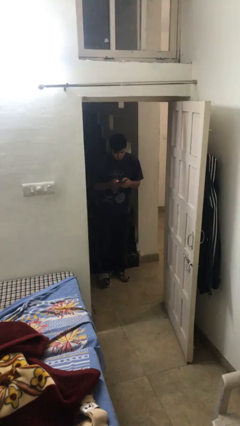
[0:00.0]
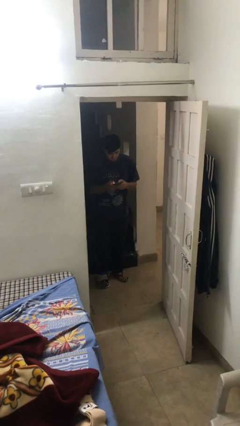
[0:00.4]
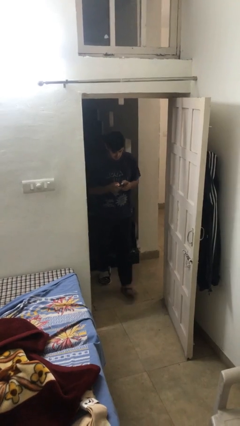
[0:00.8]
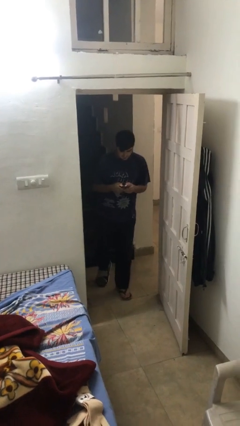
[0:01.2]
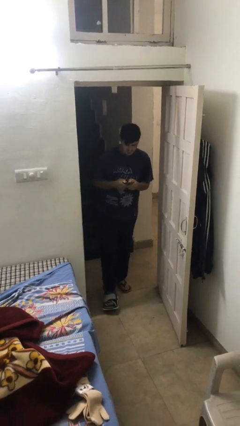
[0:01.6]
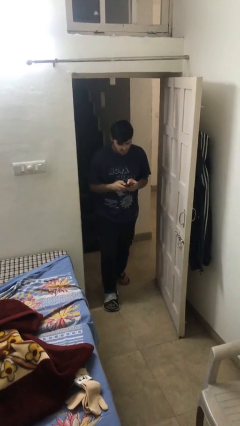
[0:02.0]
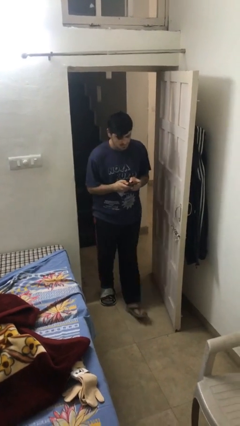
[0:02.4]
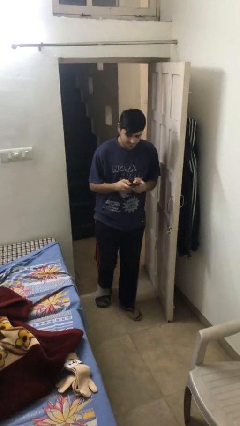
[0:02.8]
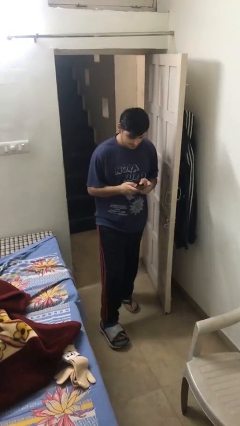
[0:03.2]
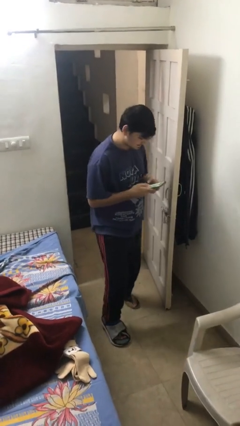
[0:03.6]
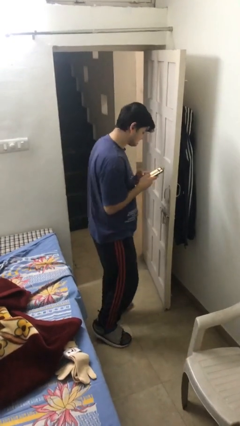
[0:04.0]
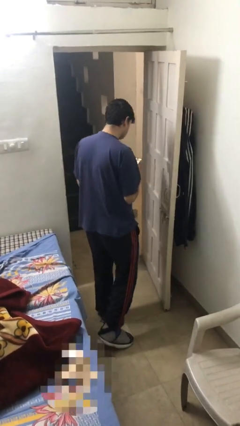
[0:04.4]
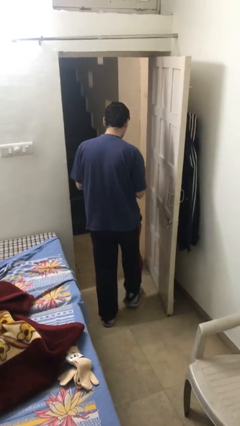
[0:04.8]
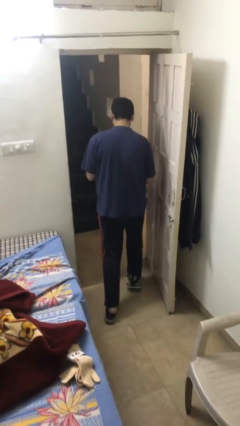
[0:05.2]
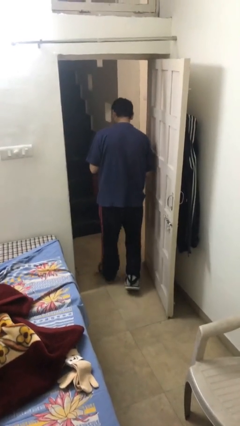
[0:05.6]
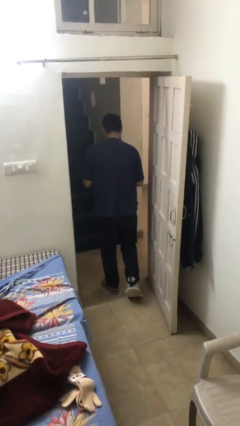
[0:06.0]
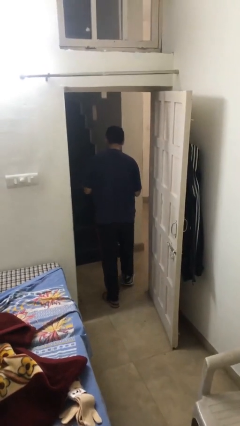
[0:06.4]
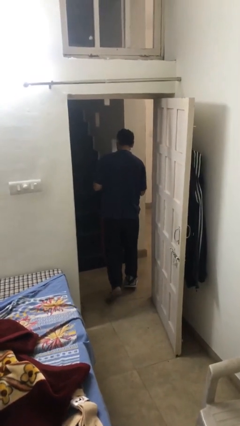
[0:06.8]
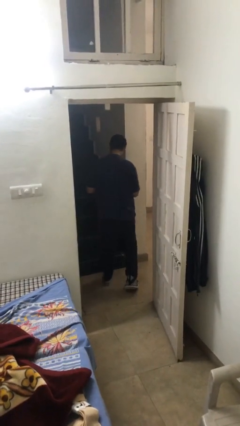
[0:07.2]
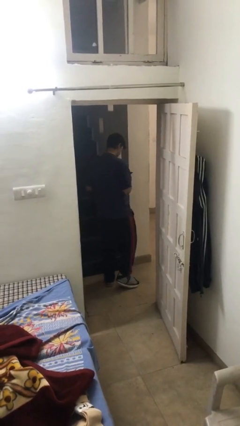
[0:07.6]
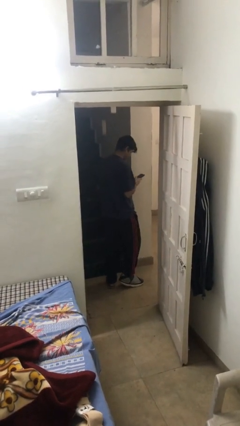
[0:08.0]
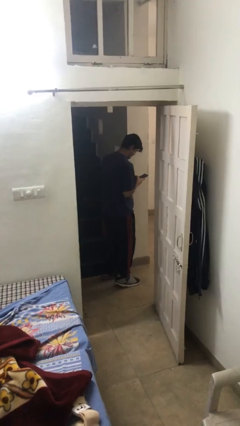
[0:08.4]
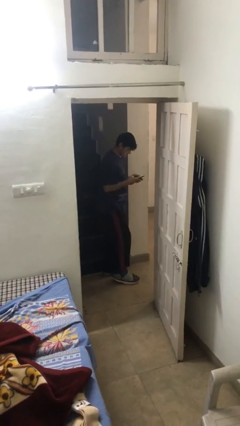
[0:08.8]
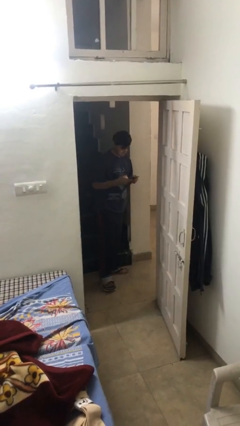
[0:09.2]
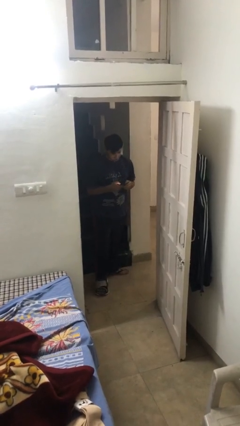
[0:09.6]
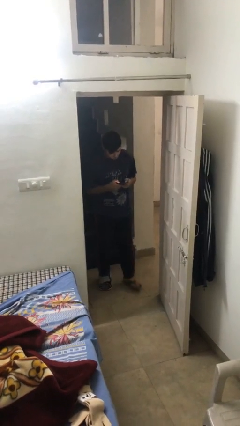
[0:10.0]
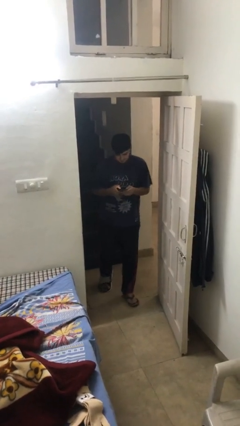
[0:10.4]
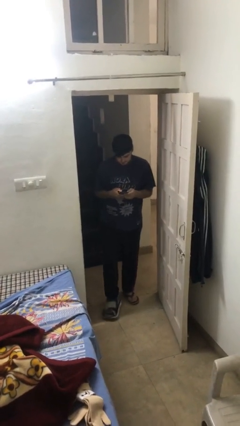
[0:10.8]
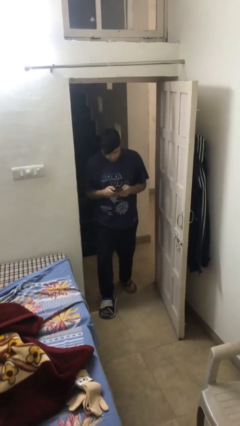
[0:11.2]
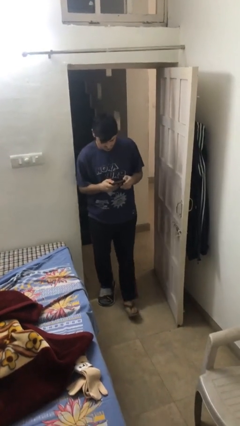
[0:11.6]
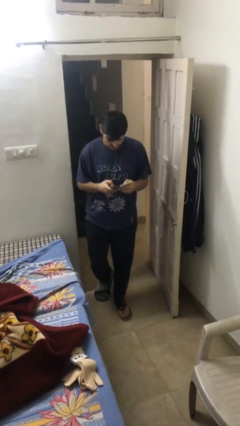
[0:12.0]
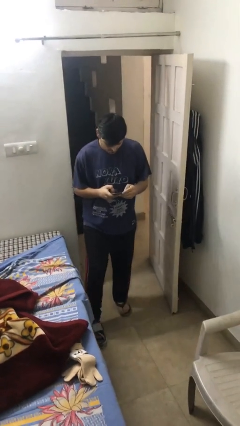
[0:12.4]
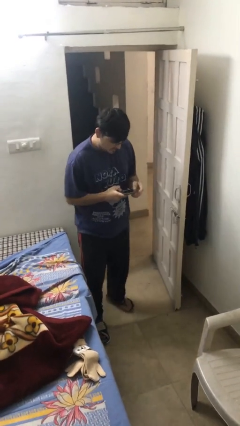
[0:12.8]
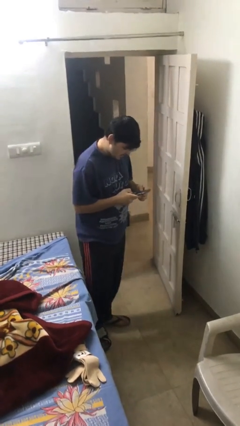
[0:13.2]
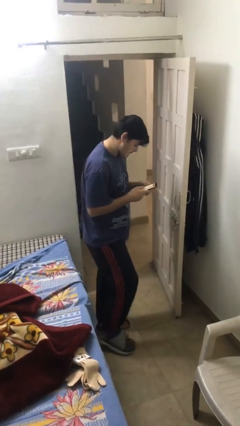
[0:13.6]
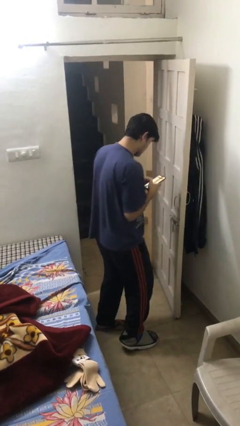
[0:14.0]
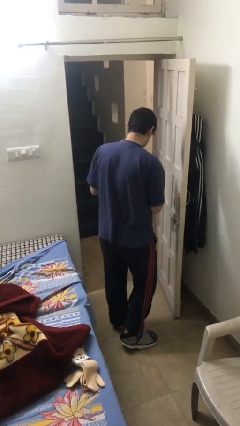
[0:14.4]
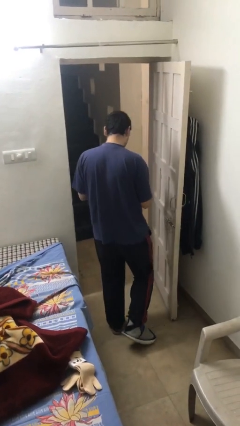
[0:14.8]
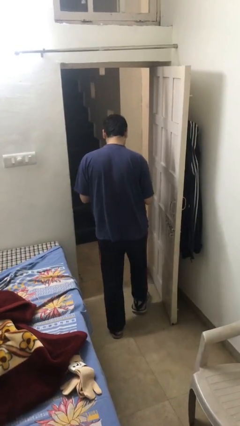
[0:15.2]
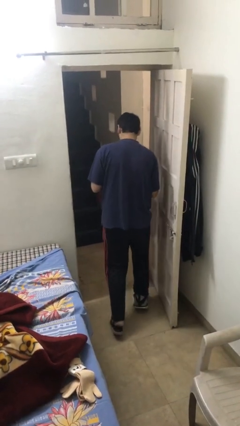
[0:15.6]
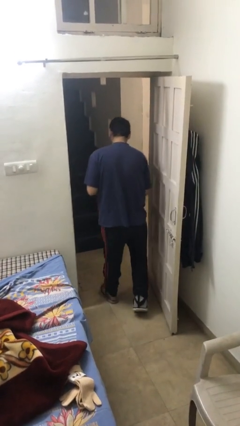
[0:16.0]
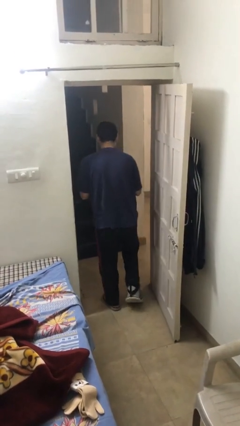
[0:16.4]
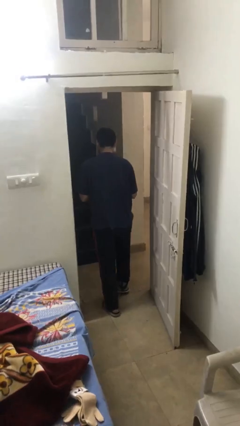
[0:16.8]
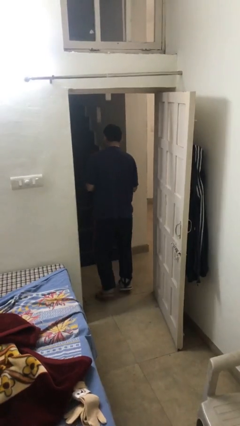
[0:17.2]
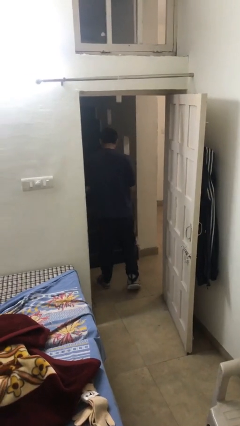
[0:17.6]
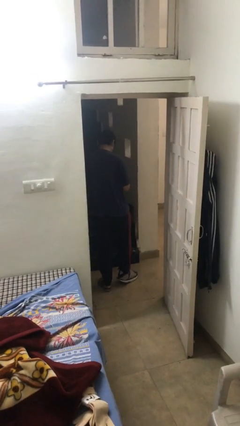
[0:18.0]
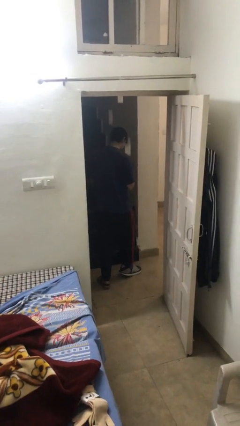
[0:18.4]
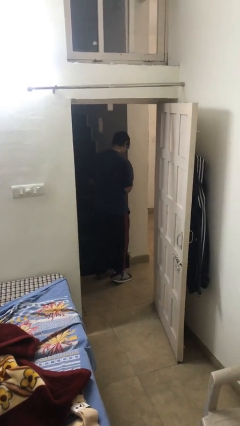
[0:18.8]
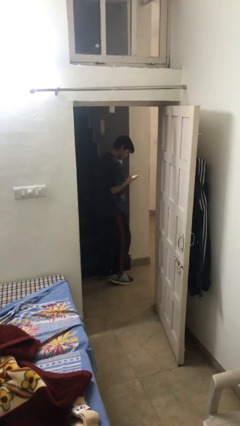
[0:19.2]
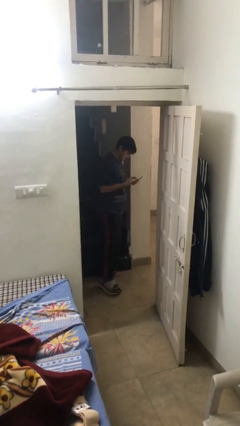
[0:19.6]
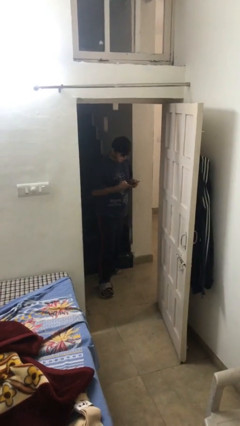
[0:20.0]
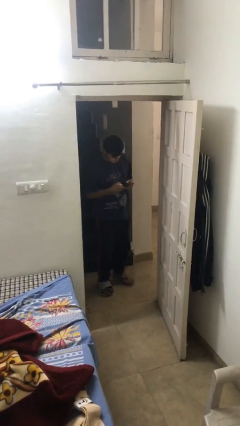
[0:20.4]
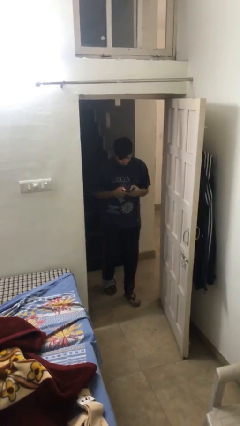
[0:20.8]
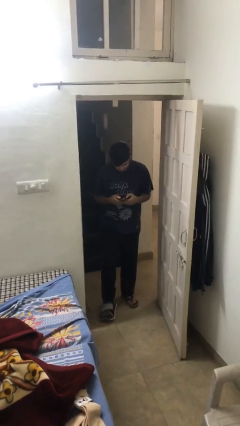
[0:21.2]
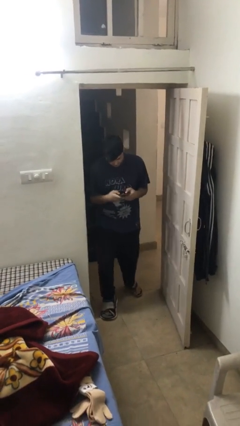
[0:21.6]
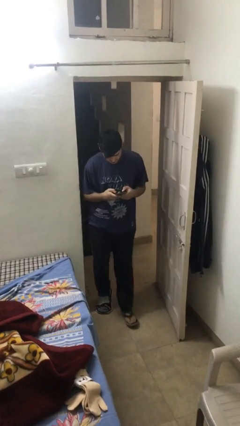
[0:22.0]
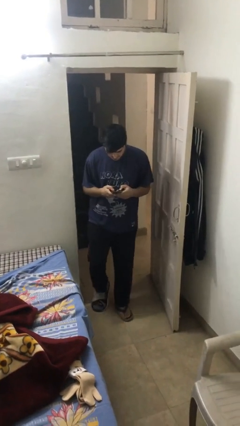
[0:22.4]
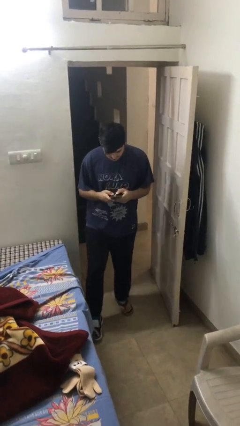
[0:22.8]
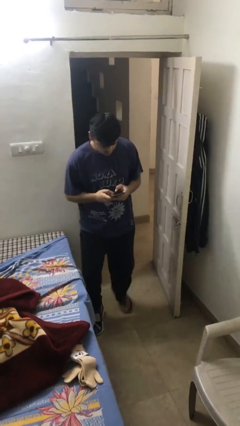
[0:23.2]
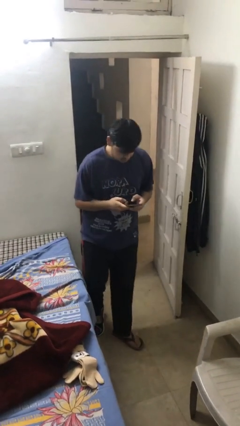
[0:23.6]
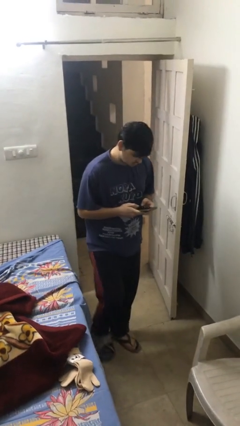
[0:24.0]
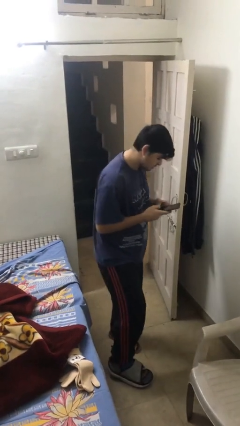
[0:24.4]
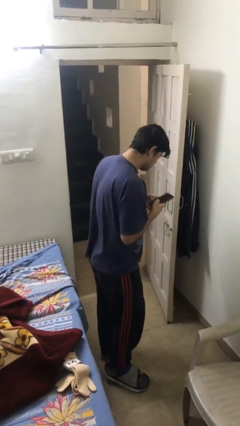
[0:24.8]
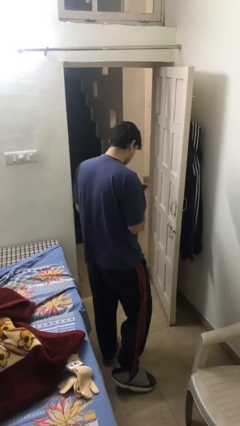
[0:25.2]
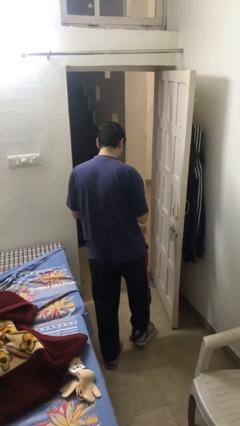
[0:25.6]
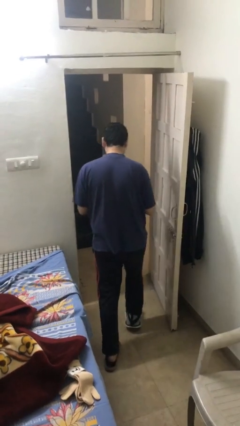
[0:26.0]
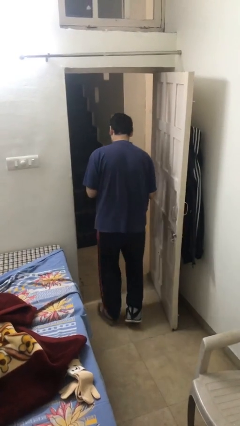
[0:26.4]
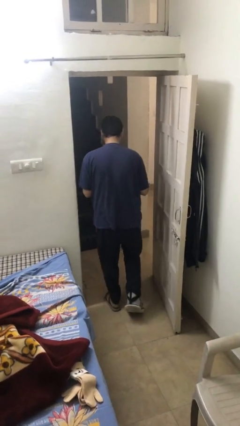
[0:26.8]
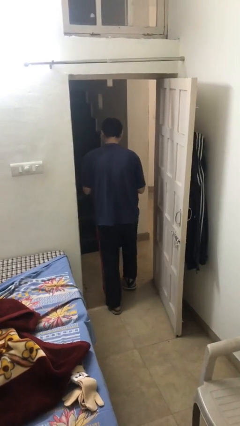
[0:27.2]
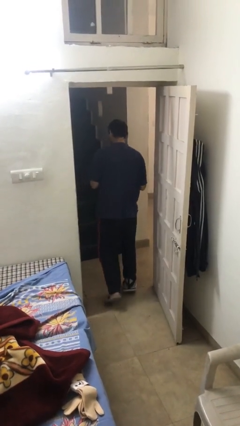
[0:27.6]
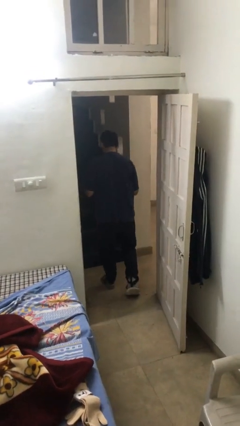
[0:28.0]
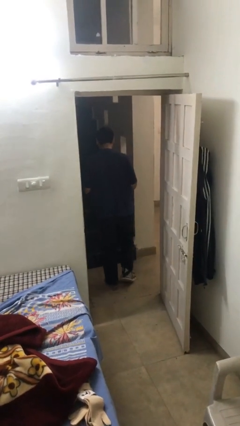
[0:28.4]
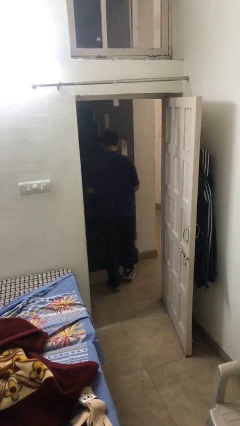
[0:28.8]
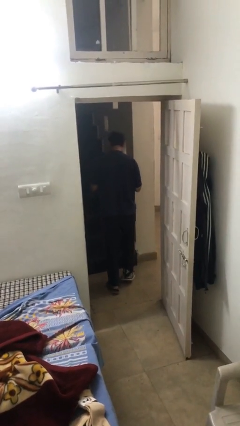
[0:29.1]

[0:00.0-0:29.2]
person texts on phone

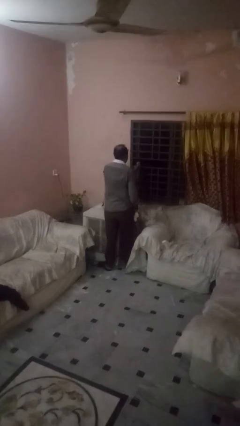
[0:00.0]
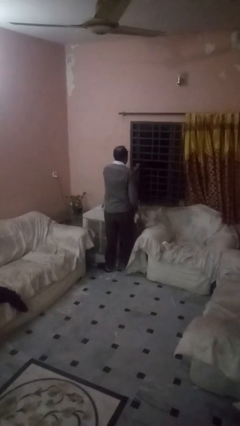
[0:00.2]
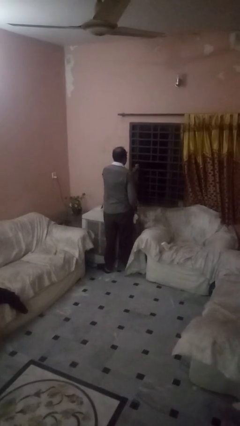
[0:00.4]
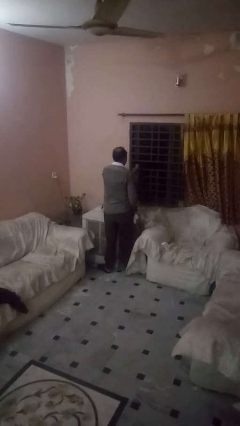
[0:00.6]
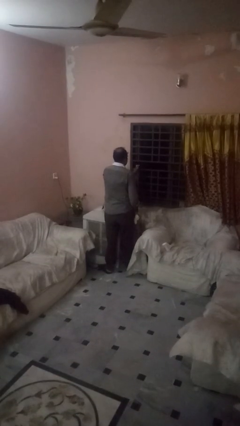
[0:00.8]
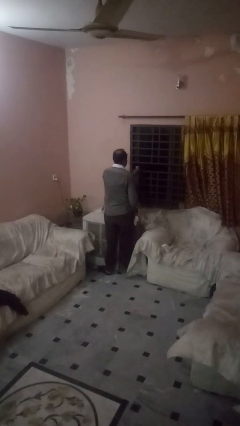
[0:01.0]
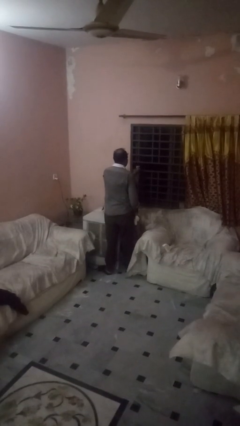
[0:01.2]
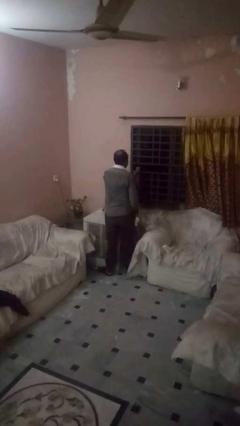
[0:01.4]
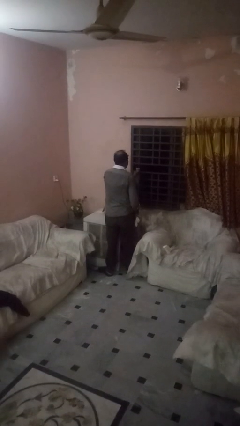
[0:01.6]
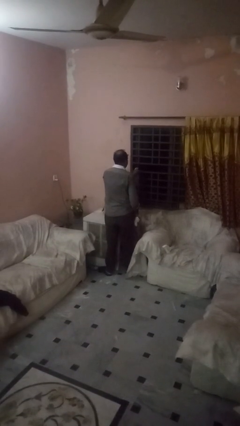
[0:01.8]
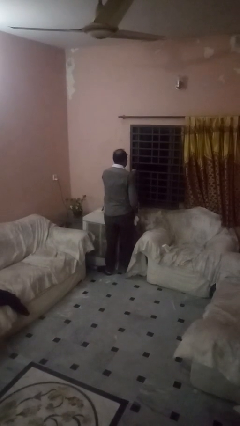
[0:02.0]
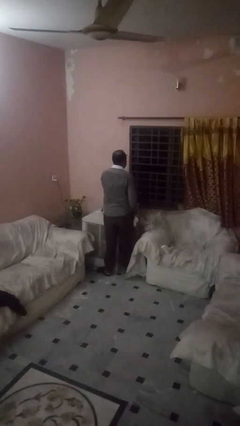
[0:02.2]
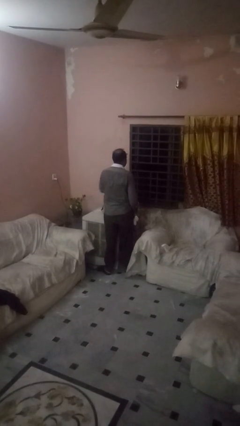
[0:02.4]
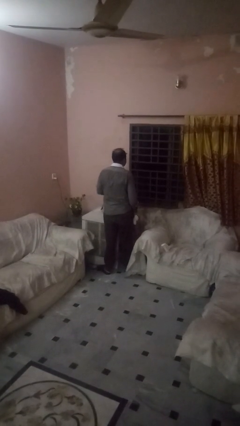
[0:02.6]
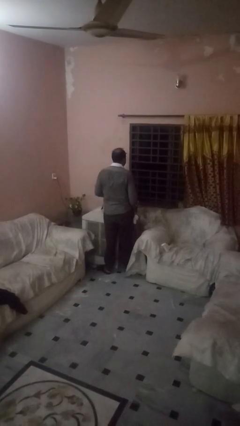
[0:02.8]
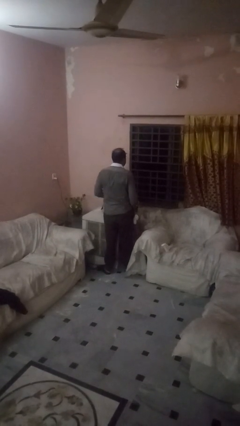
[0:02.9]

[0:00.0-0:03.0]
person sprays from bottle

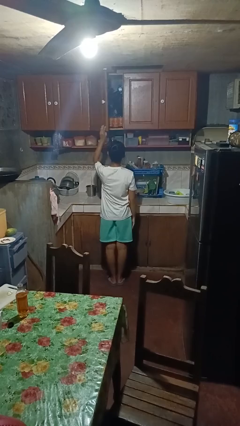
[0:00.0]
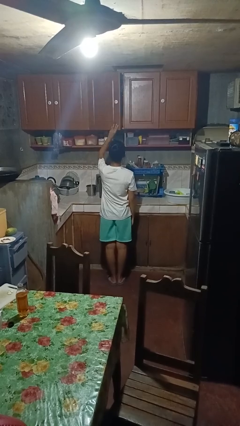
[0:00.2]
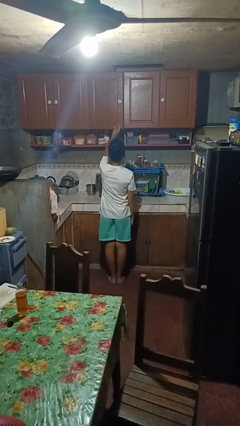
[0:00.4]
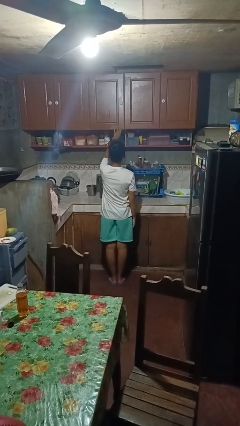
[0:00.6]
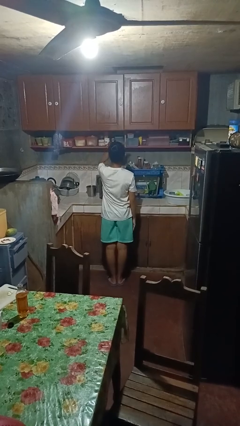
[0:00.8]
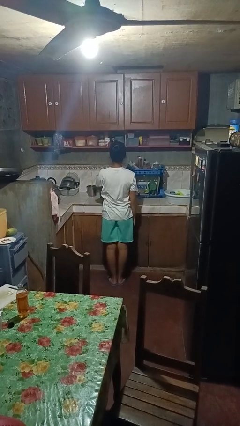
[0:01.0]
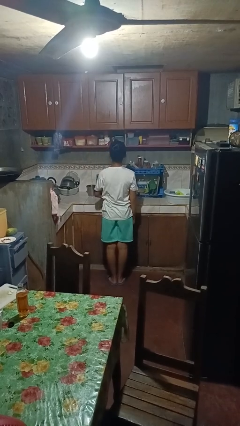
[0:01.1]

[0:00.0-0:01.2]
person closes cabinet
